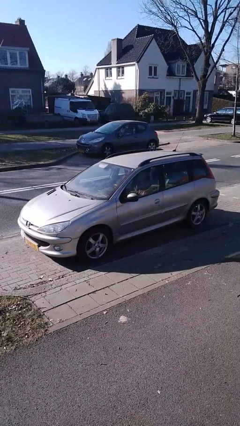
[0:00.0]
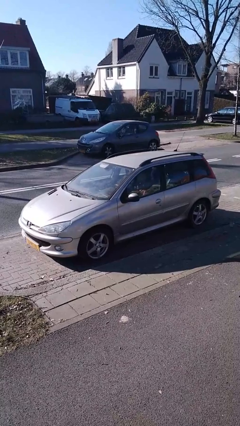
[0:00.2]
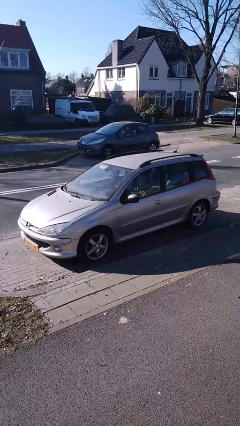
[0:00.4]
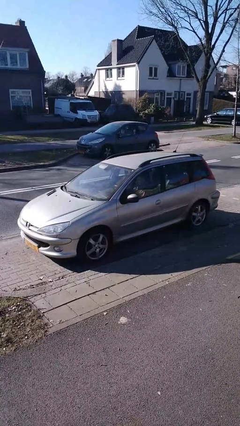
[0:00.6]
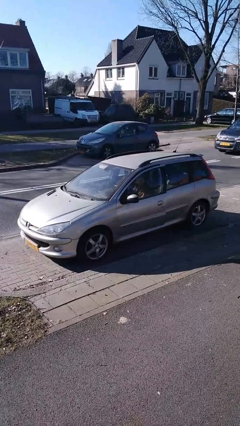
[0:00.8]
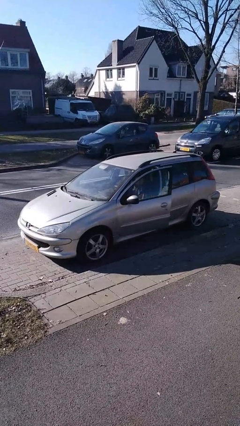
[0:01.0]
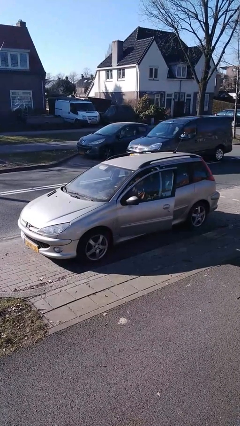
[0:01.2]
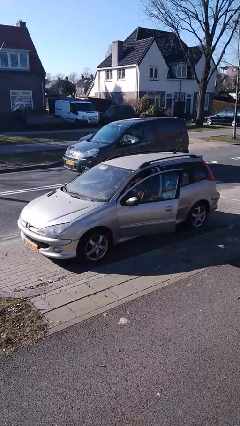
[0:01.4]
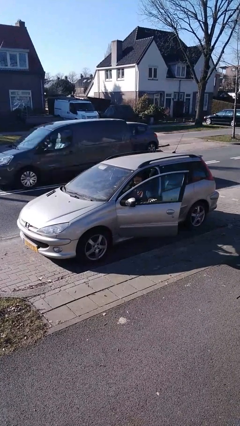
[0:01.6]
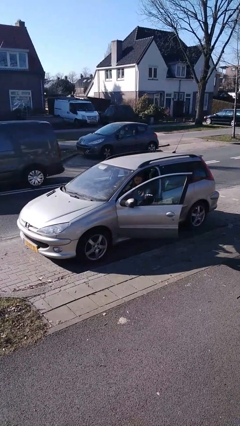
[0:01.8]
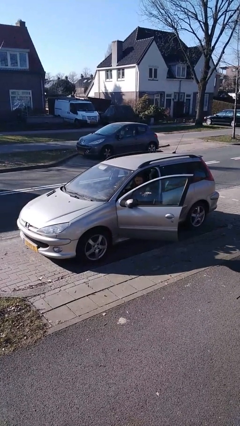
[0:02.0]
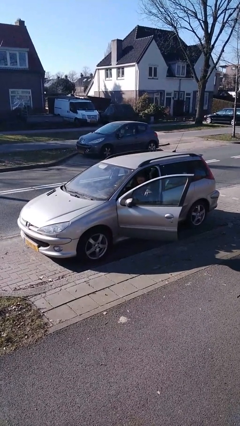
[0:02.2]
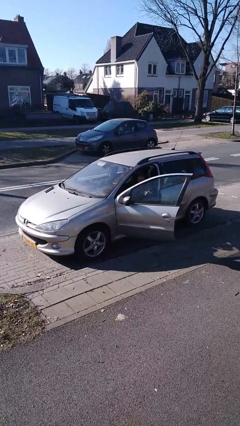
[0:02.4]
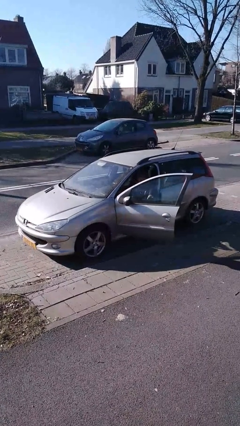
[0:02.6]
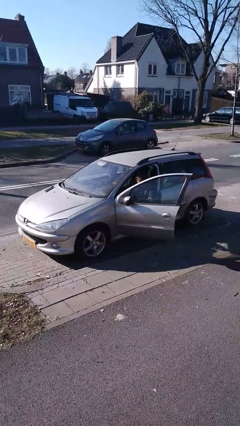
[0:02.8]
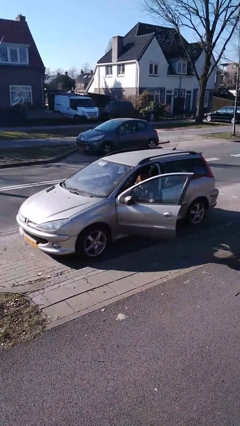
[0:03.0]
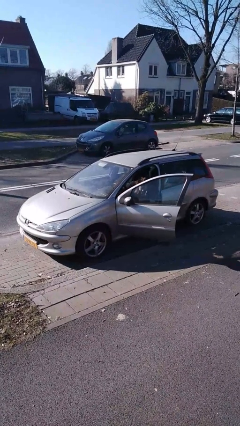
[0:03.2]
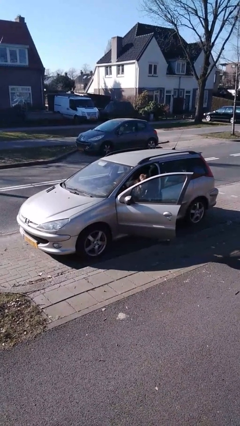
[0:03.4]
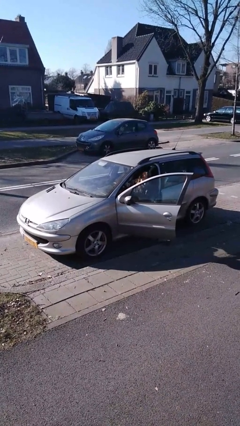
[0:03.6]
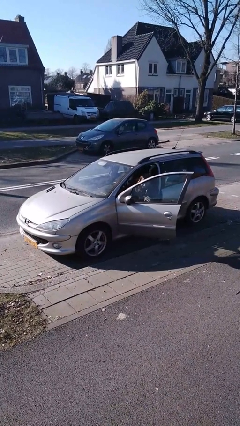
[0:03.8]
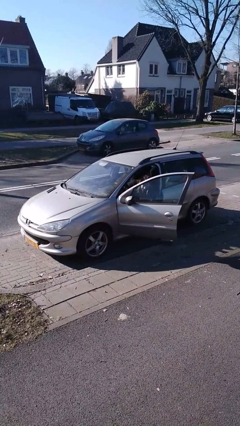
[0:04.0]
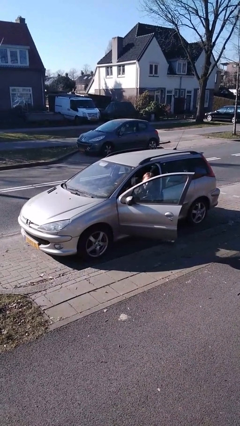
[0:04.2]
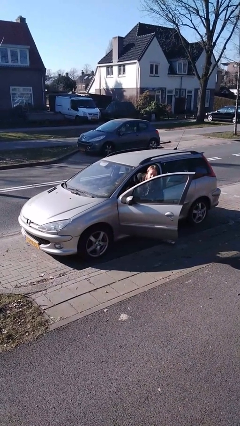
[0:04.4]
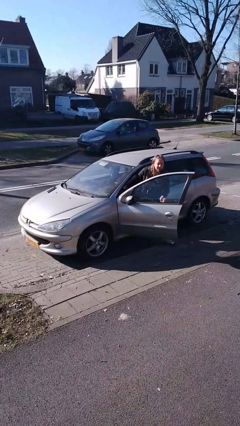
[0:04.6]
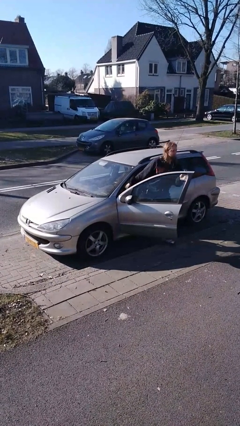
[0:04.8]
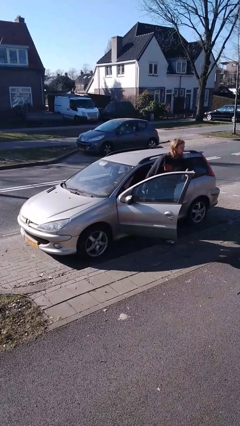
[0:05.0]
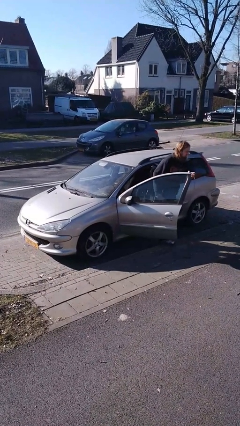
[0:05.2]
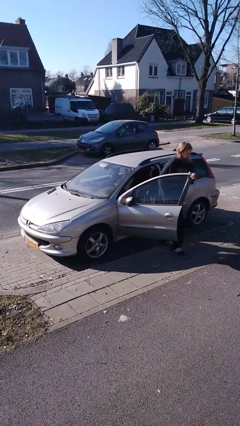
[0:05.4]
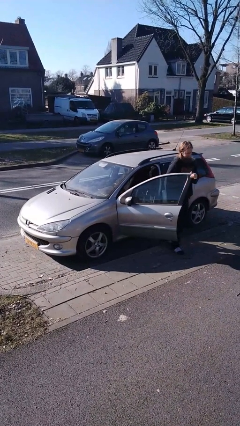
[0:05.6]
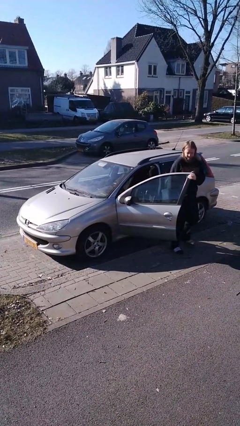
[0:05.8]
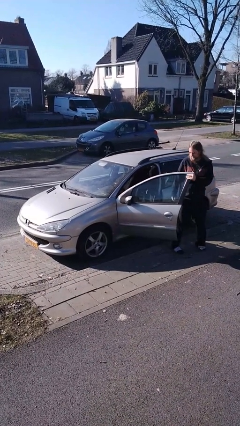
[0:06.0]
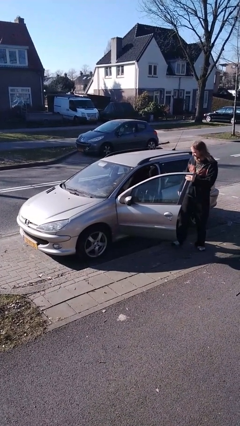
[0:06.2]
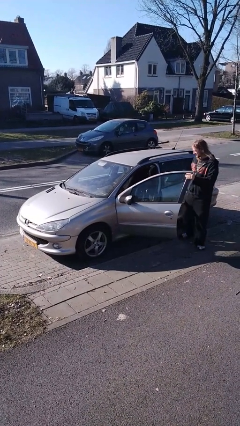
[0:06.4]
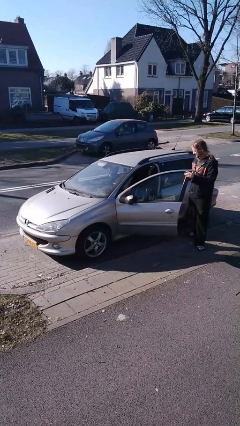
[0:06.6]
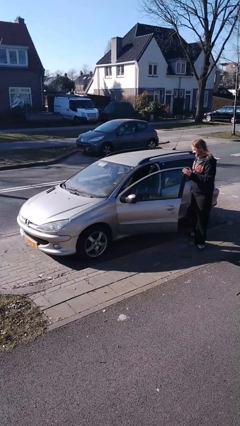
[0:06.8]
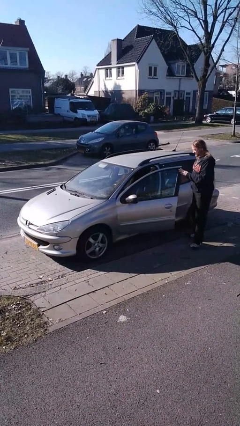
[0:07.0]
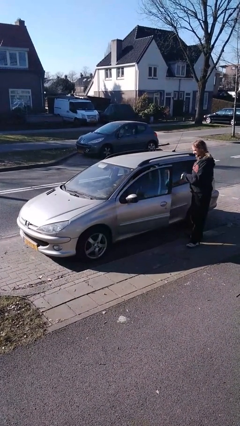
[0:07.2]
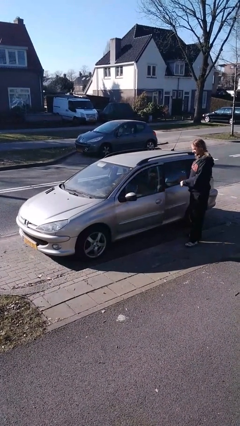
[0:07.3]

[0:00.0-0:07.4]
car drops off person

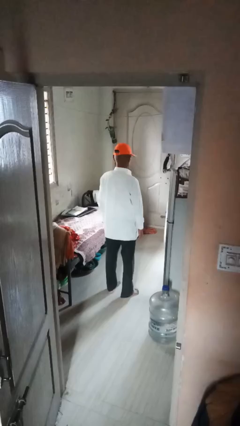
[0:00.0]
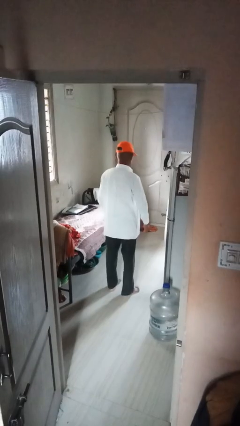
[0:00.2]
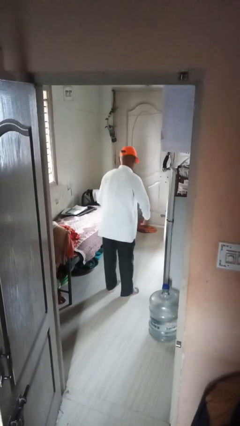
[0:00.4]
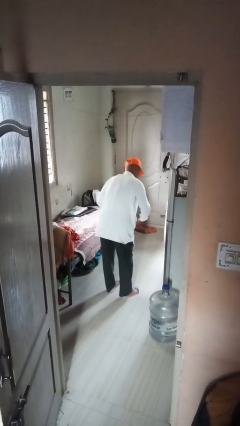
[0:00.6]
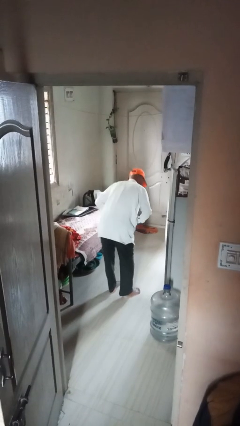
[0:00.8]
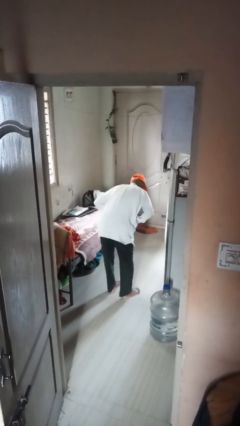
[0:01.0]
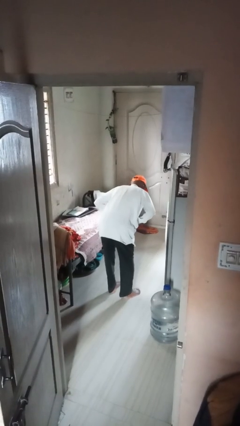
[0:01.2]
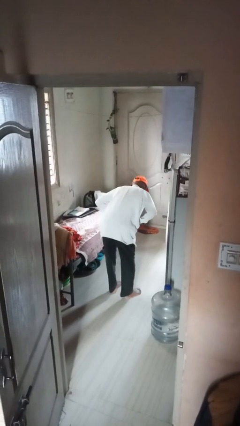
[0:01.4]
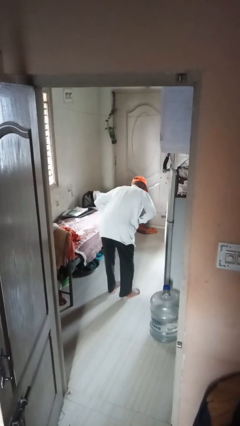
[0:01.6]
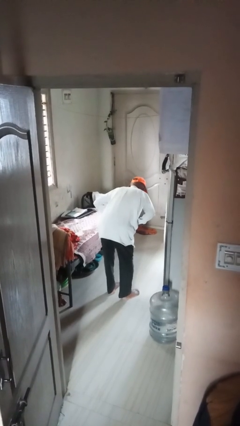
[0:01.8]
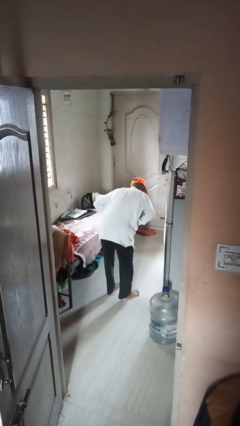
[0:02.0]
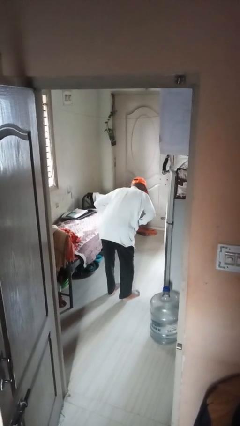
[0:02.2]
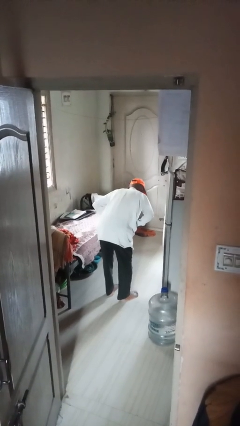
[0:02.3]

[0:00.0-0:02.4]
person bows

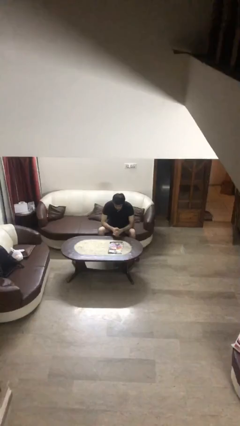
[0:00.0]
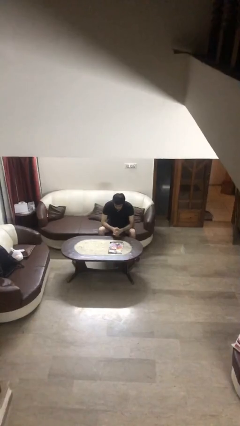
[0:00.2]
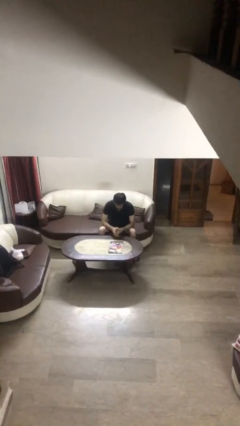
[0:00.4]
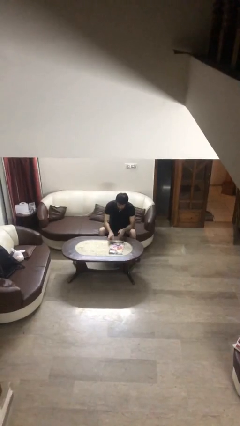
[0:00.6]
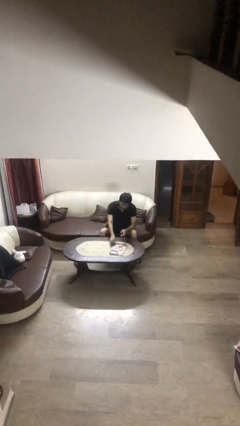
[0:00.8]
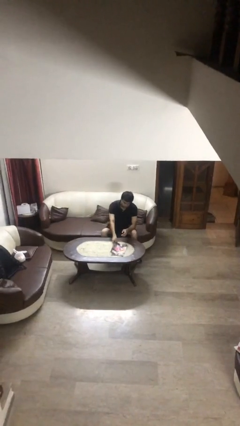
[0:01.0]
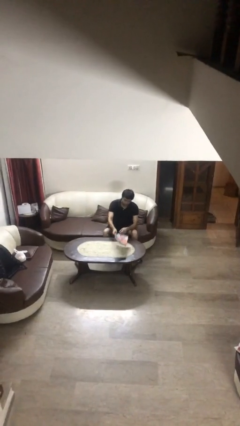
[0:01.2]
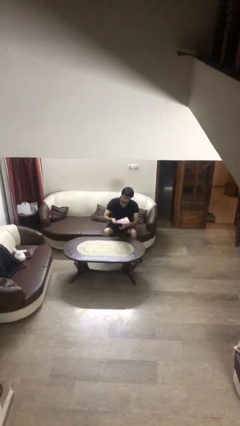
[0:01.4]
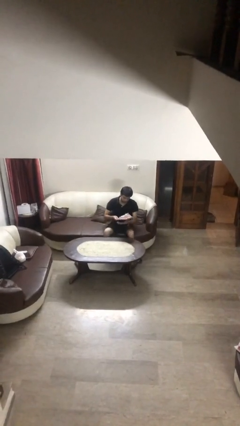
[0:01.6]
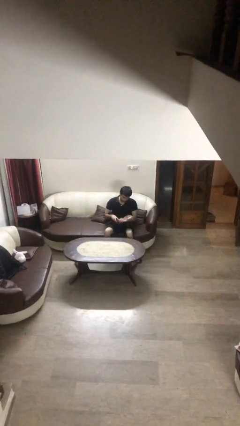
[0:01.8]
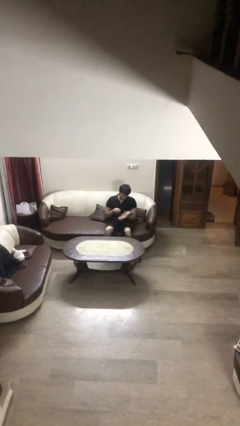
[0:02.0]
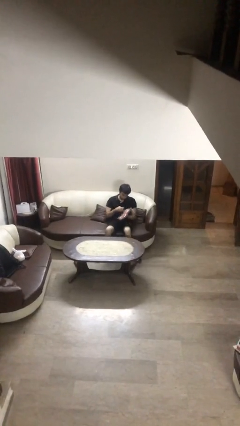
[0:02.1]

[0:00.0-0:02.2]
person picks up object from table

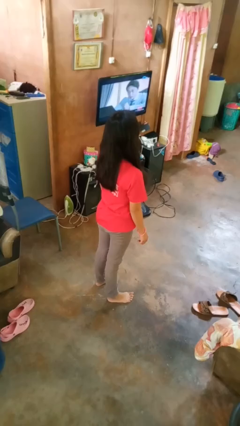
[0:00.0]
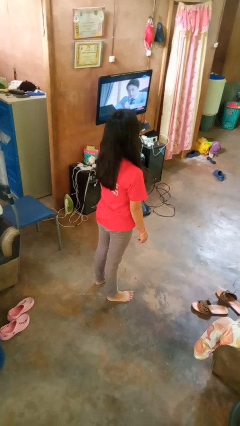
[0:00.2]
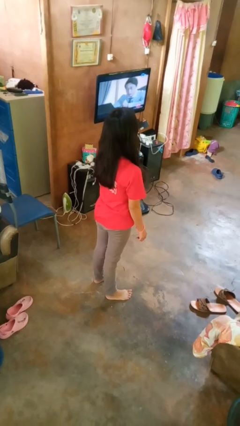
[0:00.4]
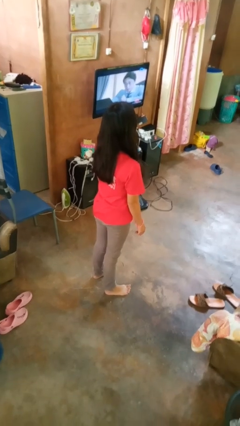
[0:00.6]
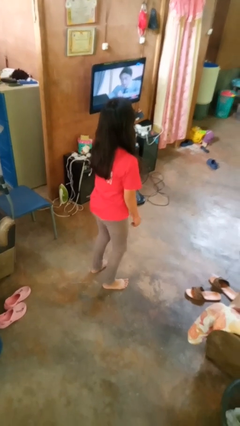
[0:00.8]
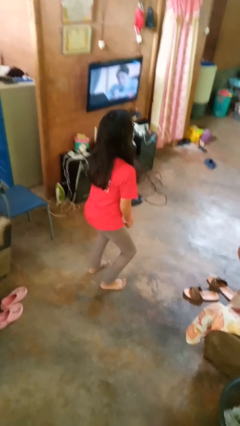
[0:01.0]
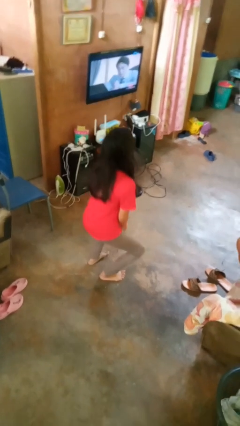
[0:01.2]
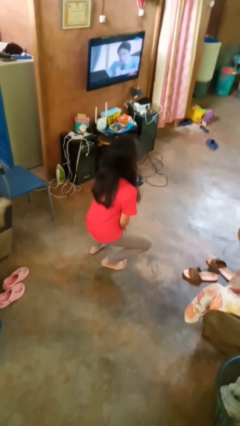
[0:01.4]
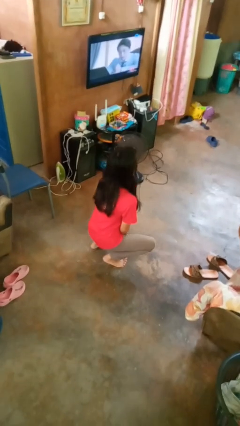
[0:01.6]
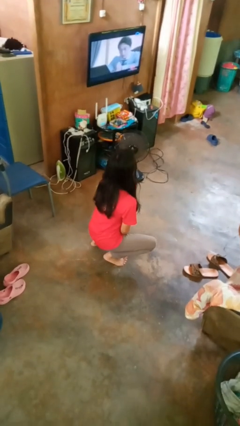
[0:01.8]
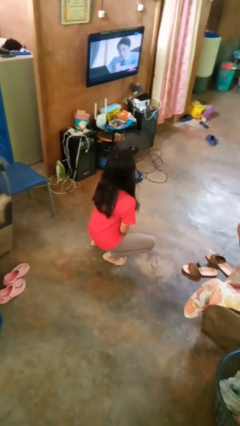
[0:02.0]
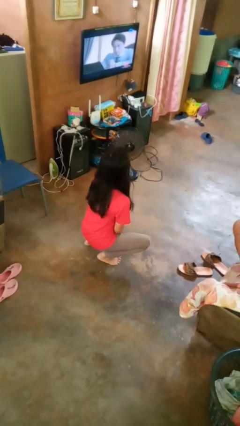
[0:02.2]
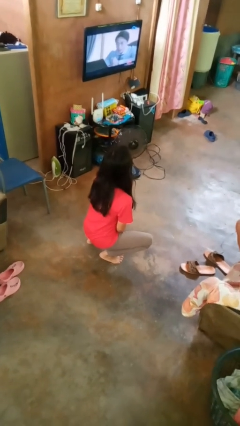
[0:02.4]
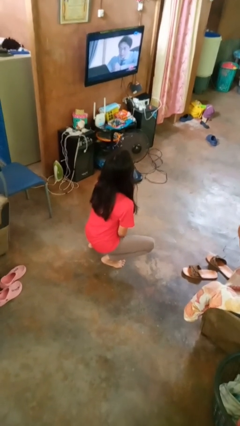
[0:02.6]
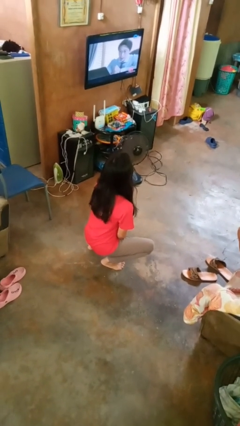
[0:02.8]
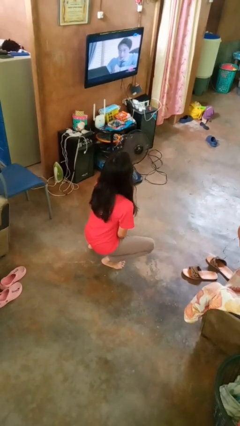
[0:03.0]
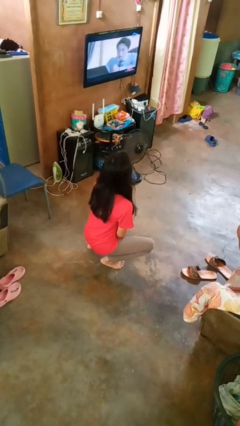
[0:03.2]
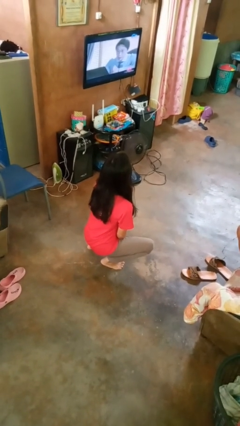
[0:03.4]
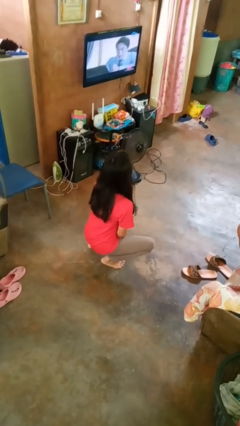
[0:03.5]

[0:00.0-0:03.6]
person squats

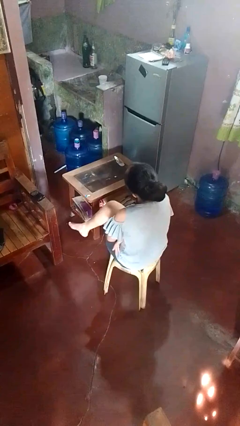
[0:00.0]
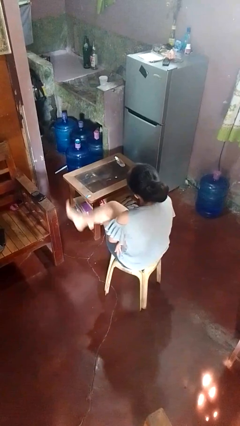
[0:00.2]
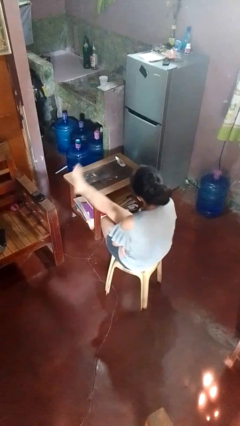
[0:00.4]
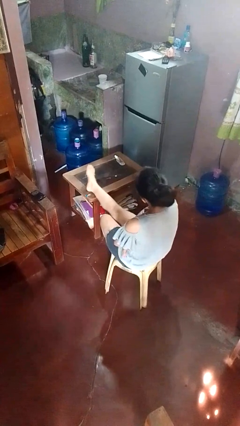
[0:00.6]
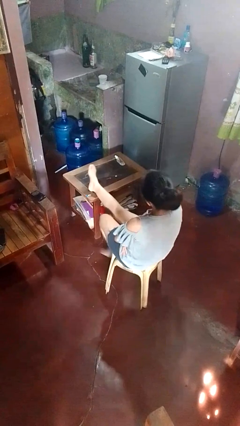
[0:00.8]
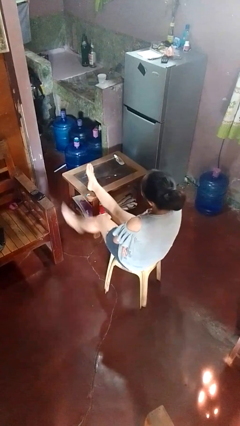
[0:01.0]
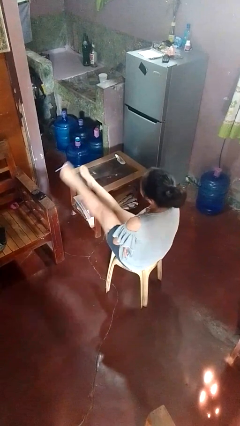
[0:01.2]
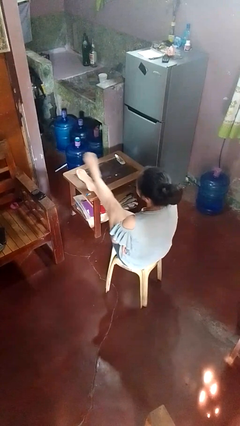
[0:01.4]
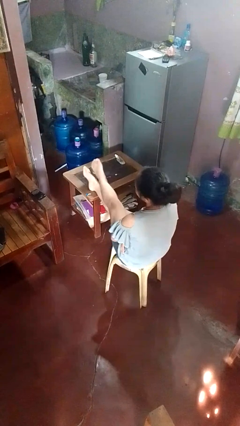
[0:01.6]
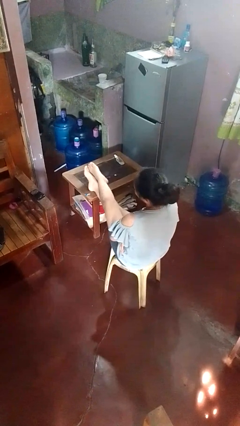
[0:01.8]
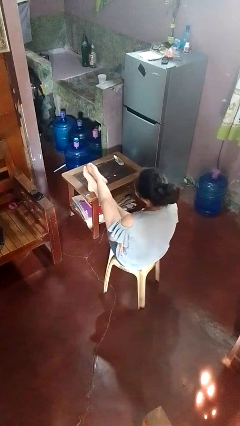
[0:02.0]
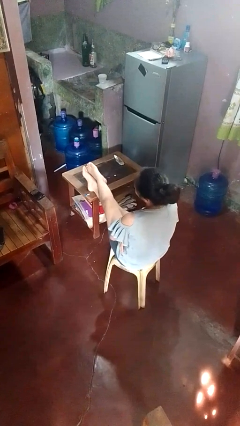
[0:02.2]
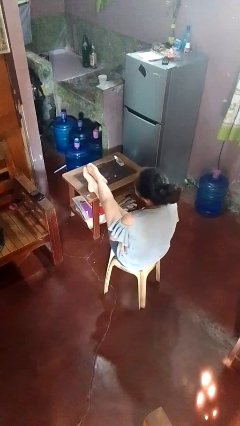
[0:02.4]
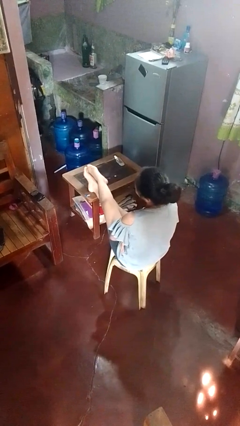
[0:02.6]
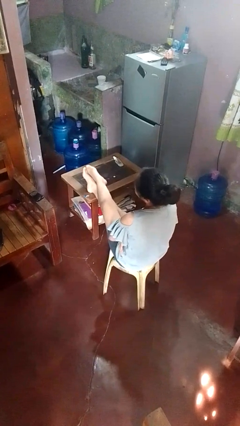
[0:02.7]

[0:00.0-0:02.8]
person puts feet up
